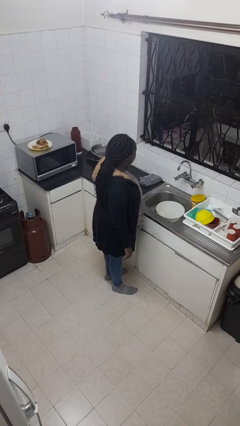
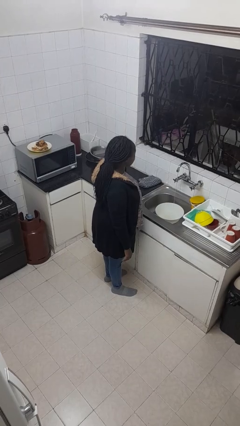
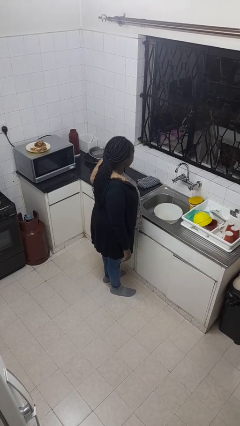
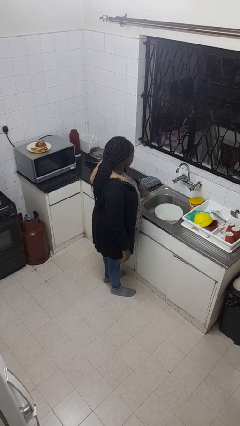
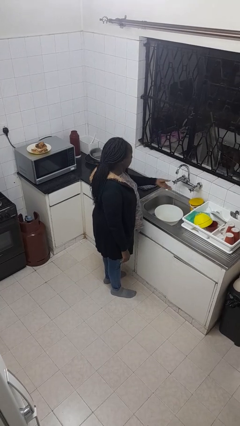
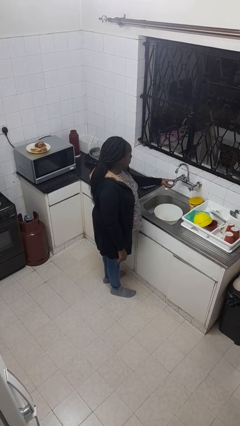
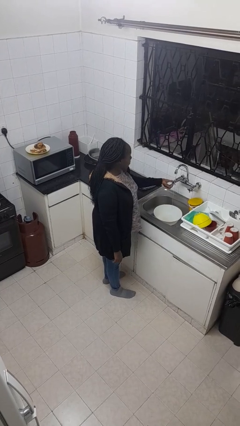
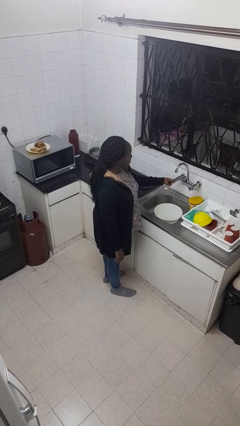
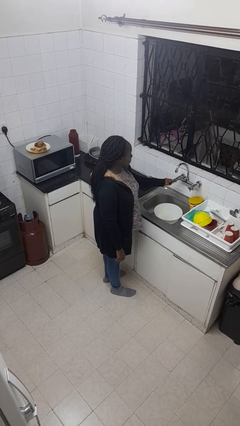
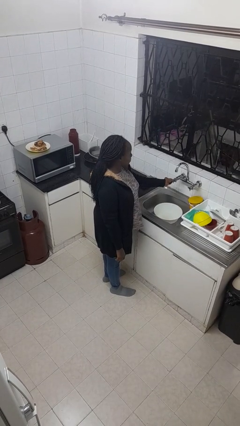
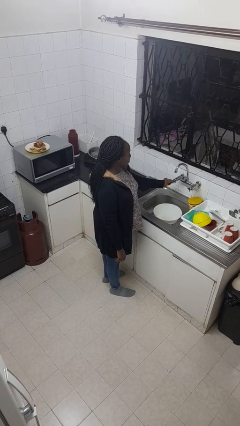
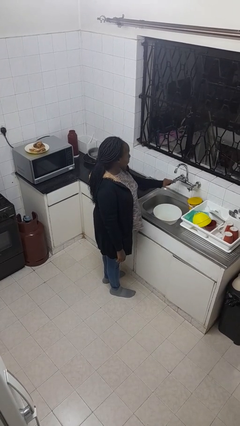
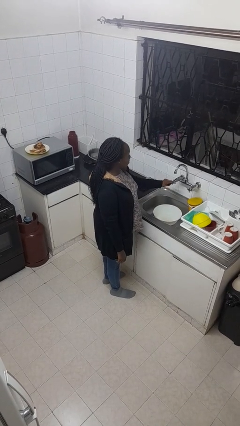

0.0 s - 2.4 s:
person turns off faucet

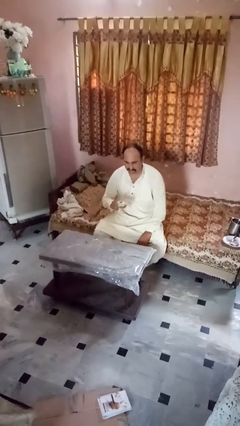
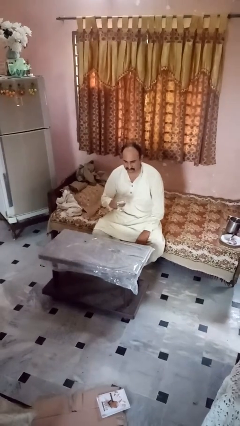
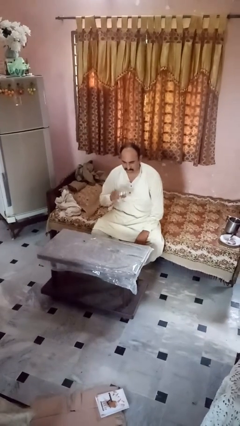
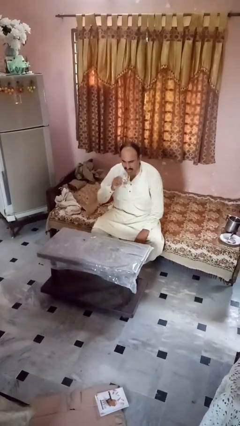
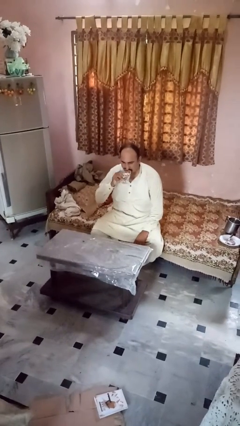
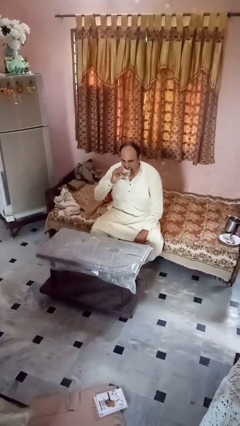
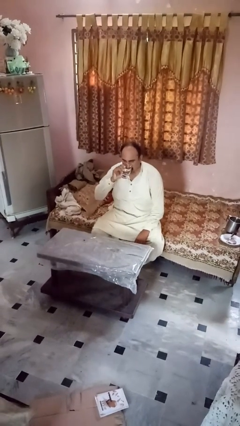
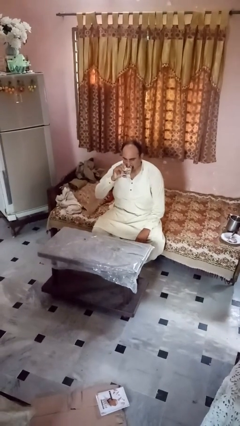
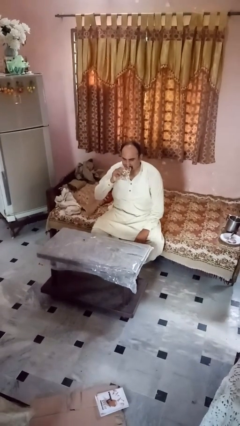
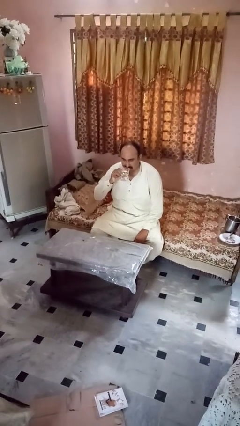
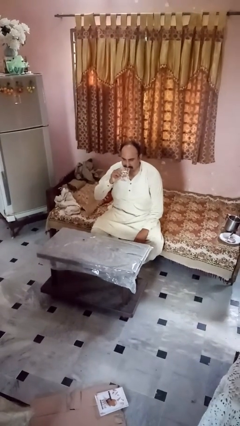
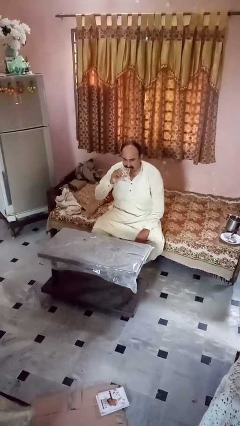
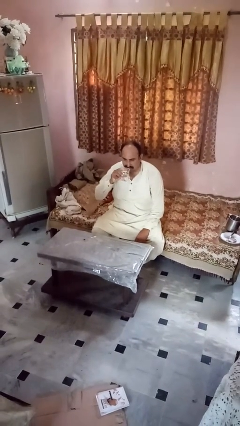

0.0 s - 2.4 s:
person drinks from shotglass

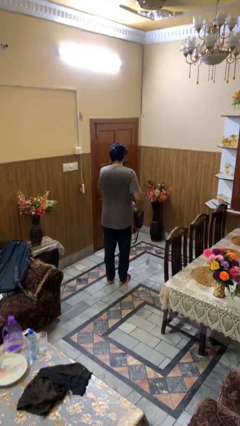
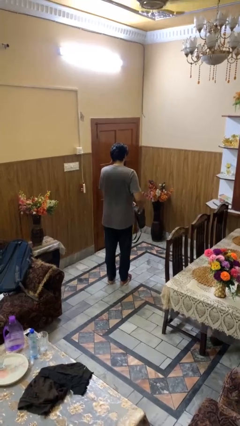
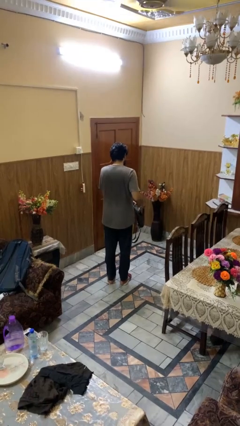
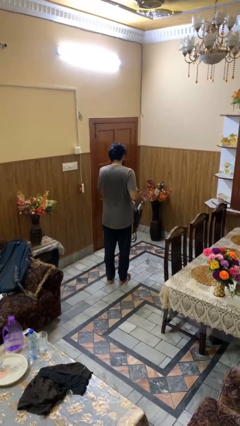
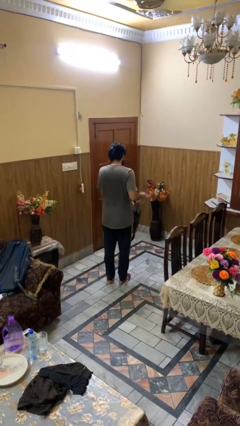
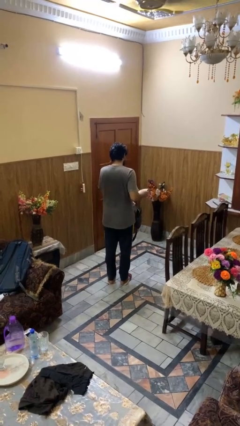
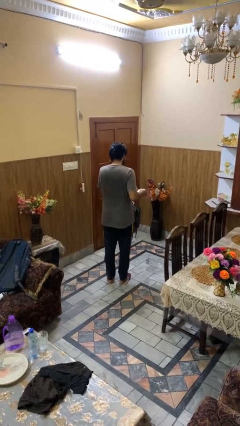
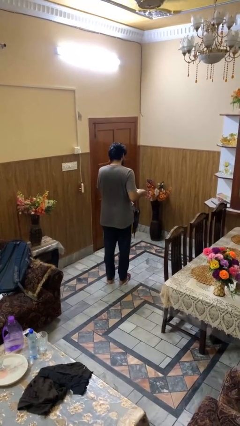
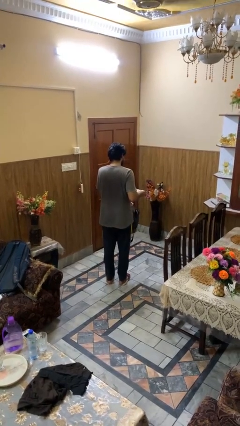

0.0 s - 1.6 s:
person takes object from purse

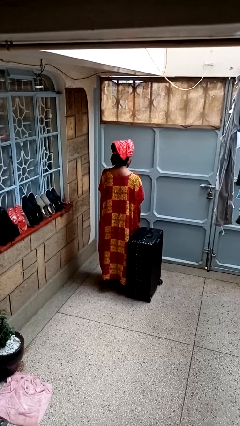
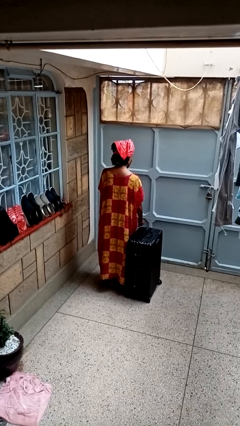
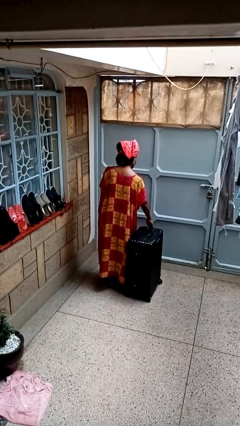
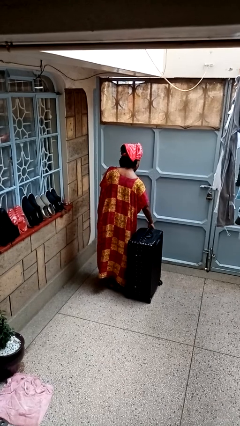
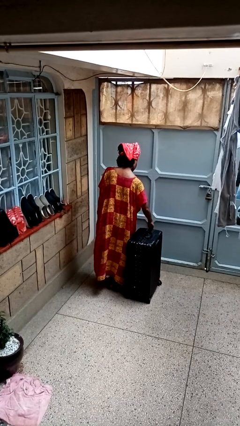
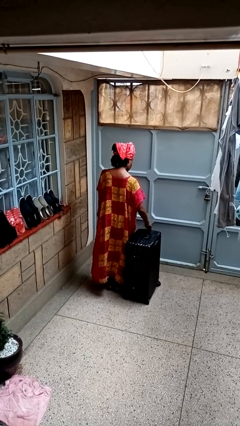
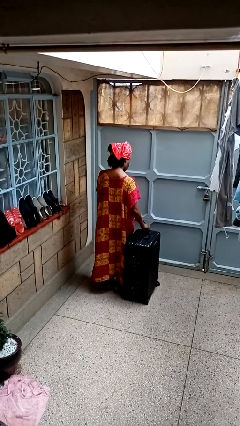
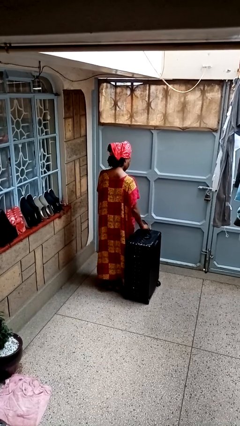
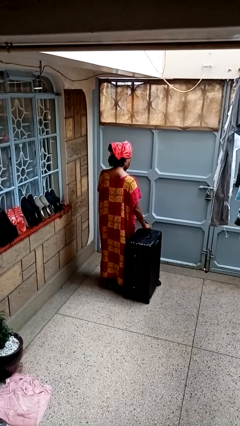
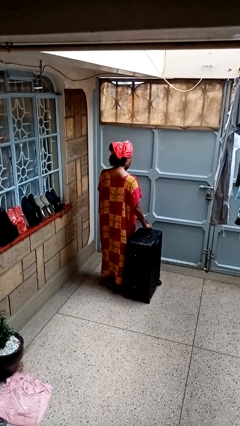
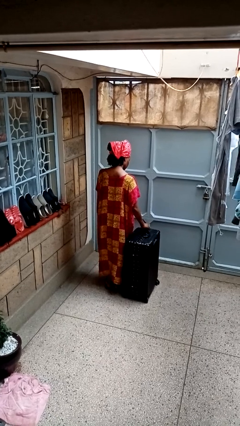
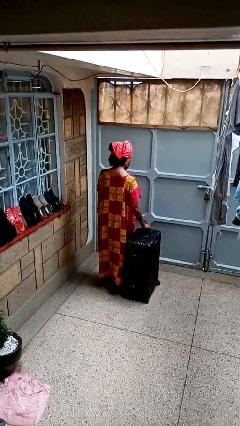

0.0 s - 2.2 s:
person opens suitcase

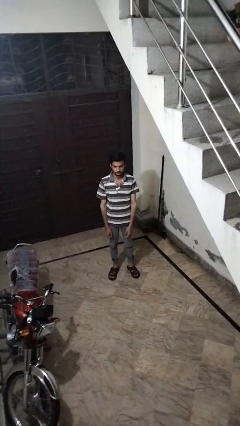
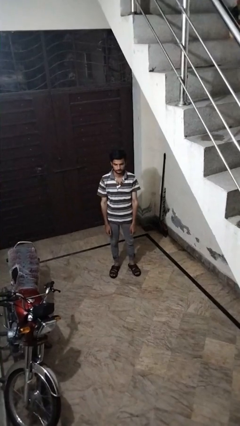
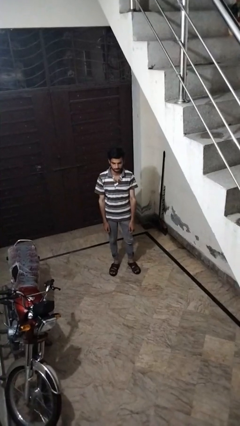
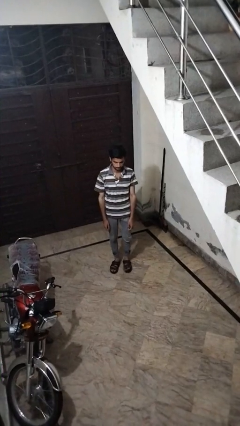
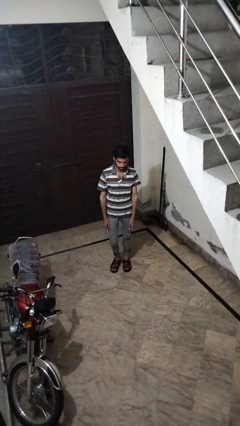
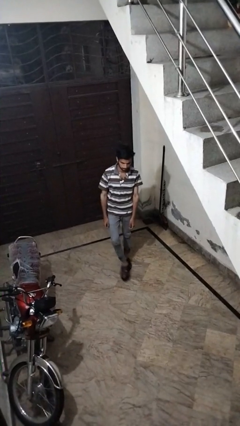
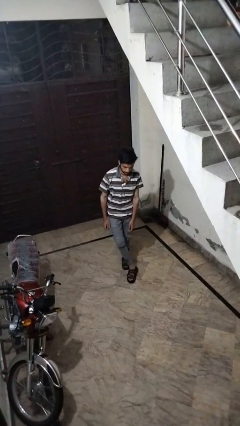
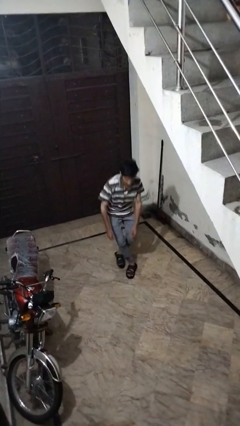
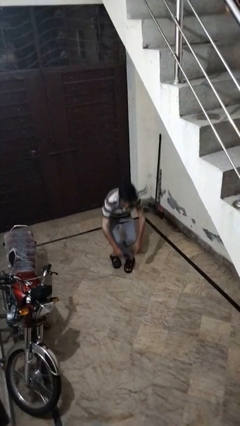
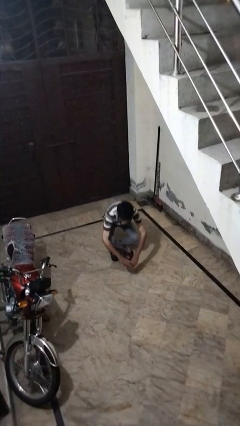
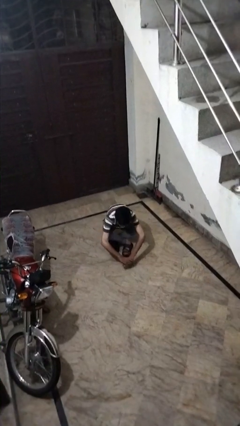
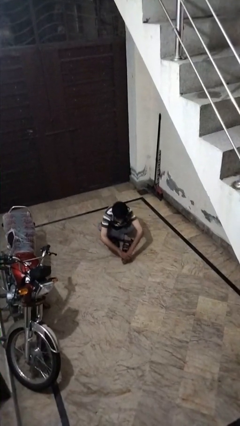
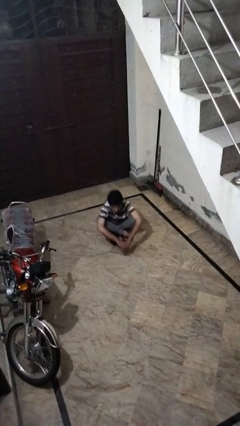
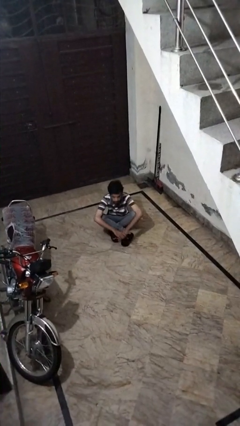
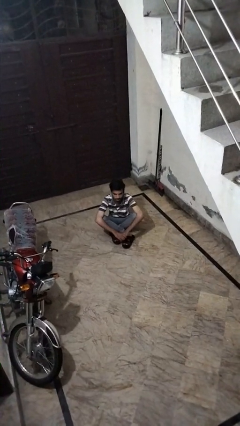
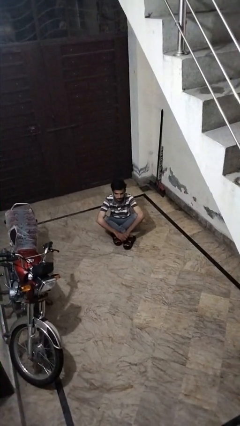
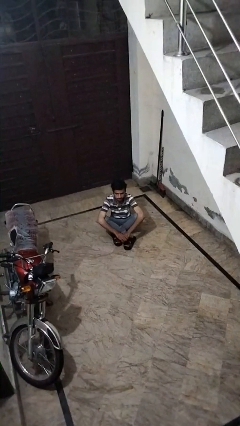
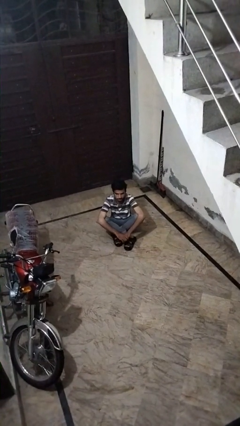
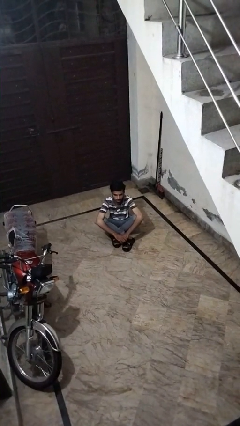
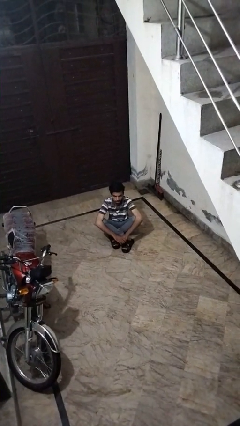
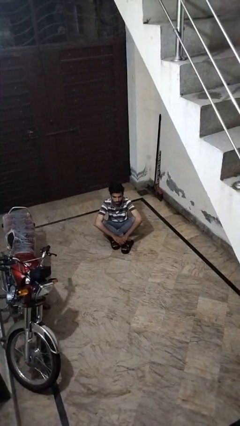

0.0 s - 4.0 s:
person sits crisscross

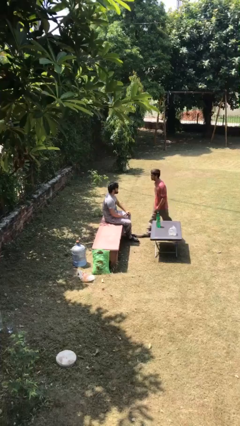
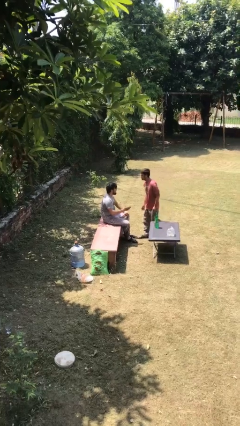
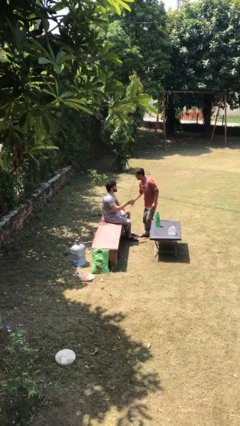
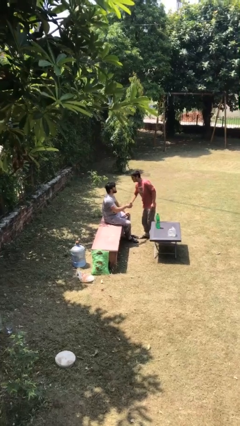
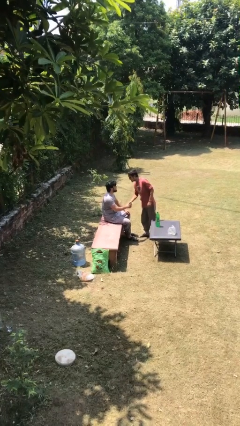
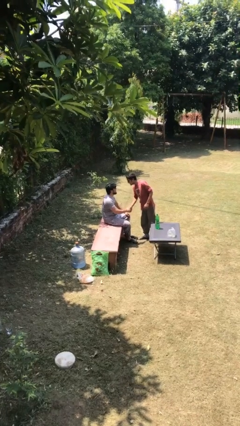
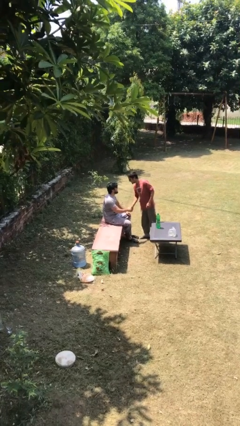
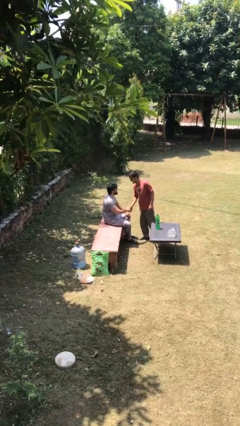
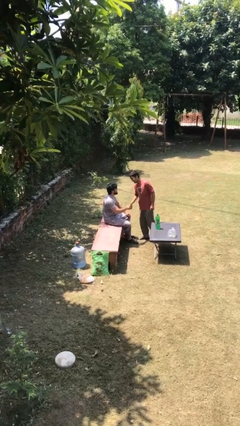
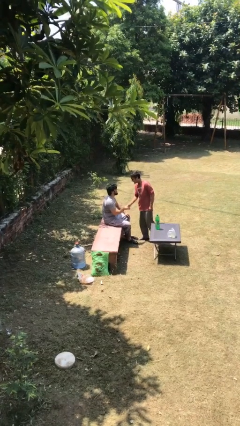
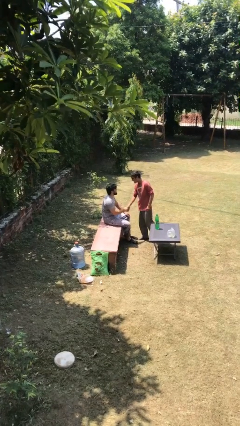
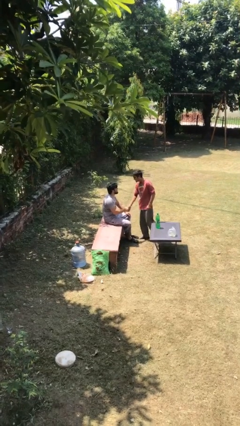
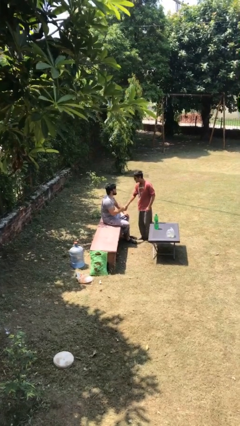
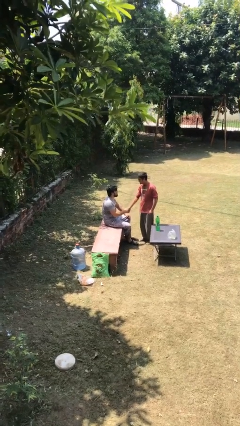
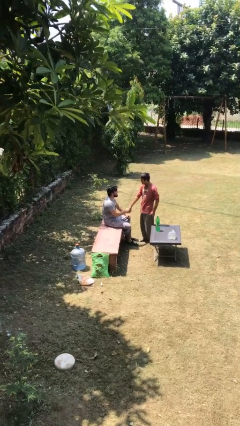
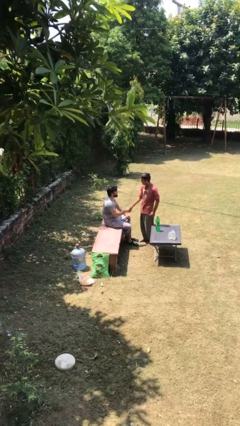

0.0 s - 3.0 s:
person shakes hand

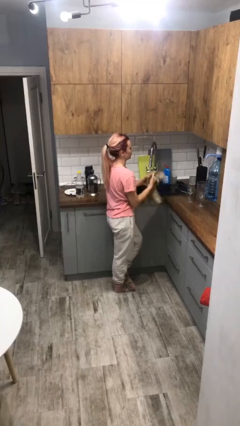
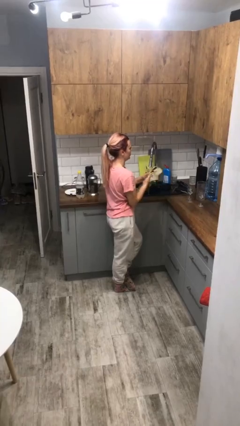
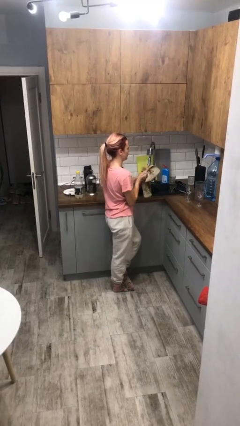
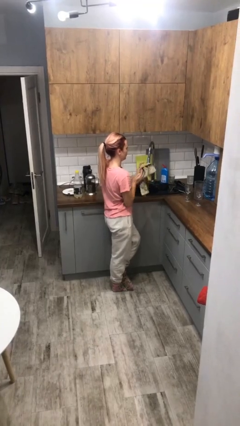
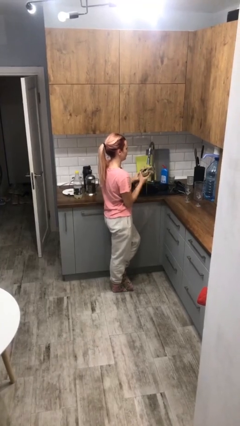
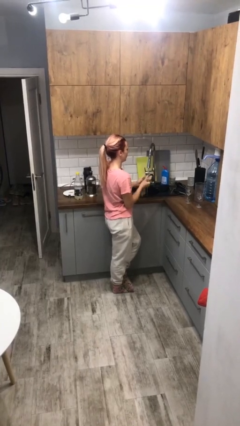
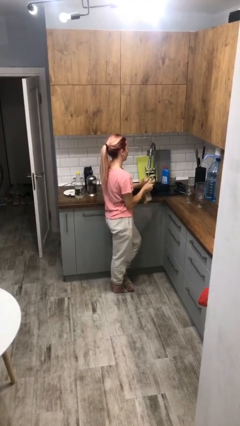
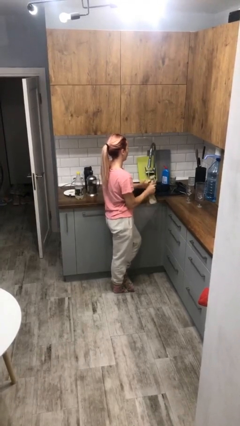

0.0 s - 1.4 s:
person dries hands with towel

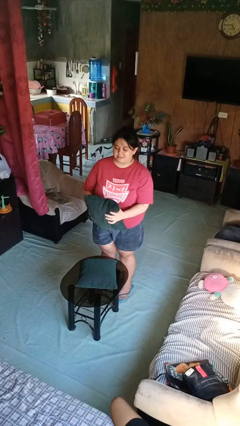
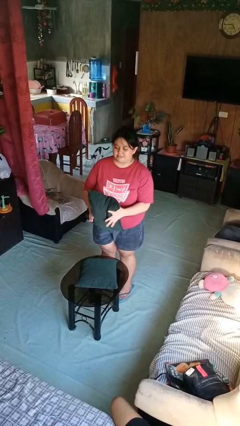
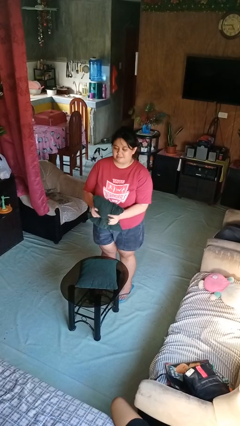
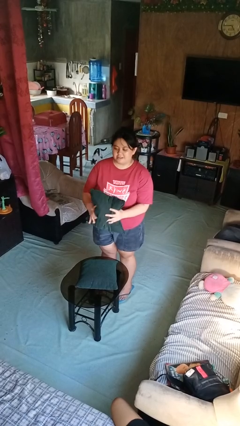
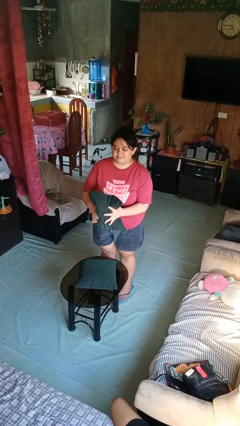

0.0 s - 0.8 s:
person squeezes object
